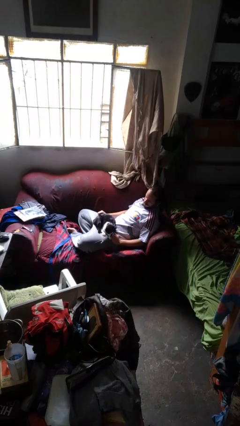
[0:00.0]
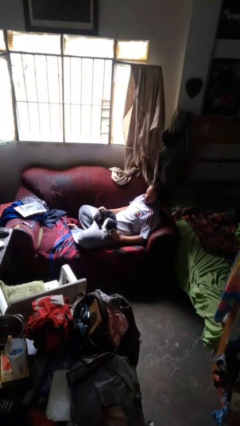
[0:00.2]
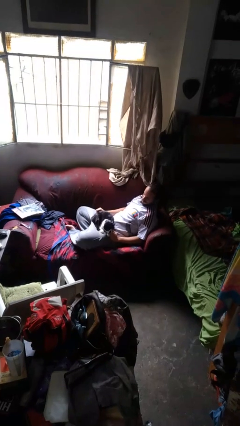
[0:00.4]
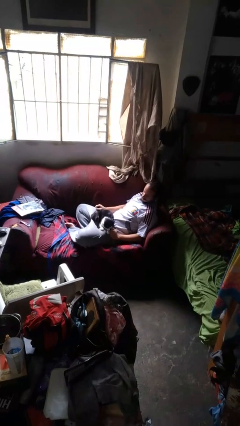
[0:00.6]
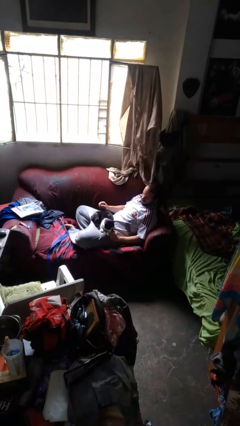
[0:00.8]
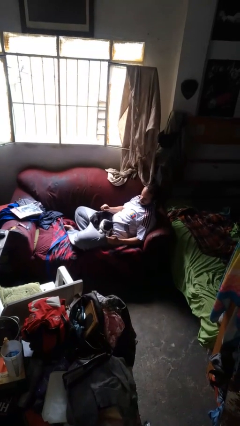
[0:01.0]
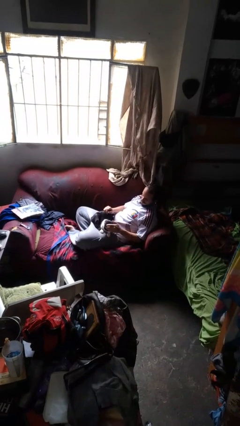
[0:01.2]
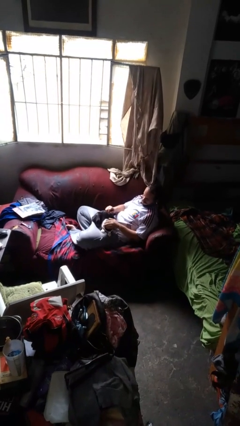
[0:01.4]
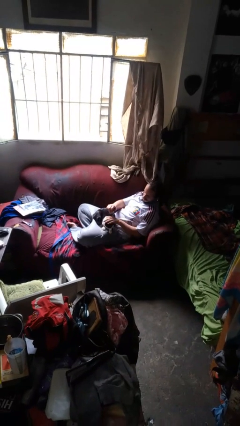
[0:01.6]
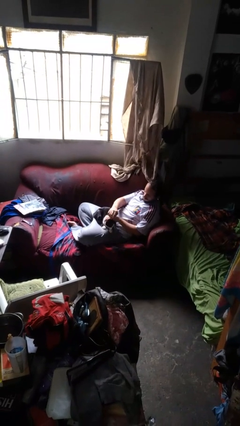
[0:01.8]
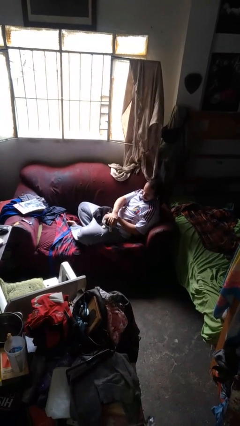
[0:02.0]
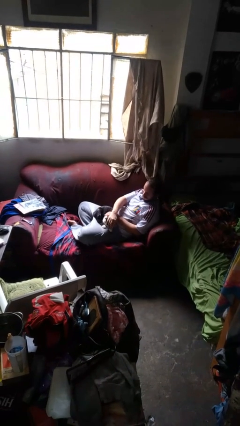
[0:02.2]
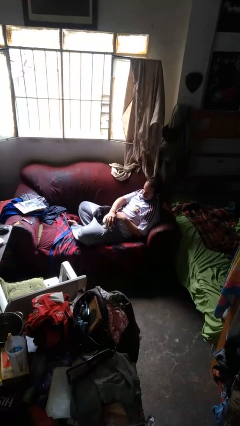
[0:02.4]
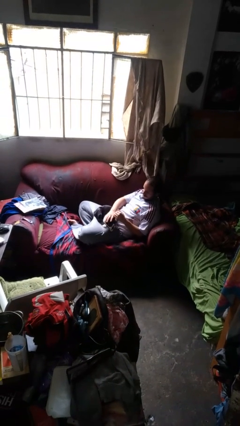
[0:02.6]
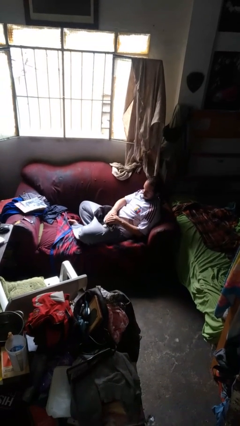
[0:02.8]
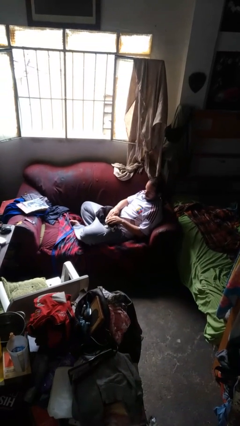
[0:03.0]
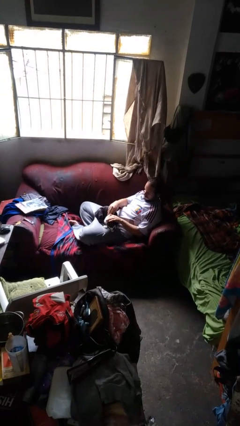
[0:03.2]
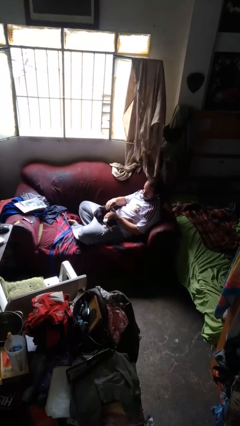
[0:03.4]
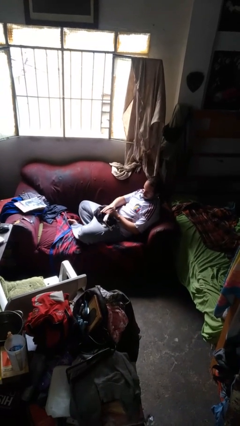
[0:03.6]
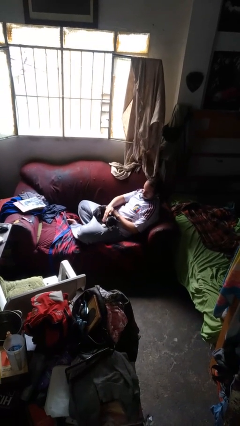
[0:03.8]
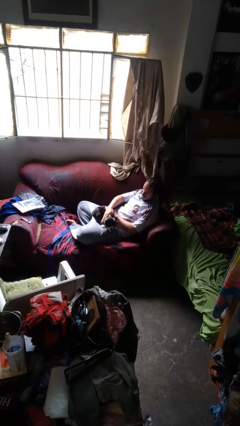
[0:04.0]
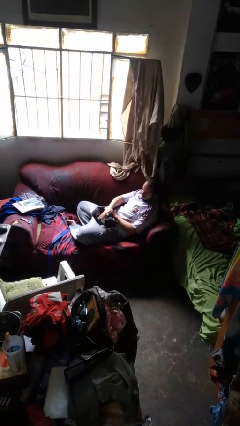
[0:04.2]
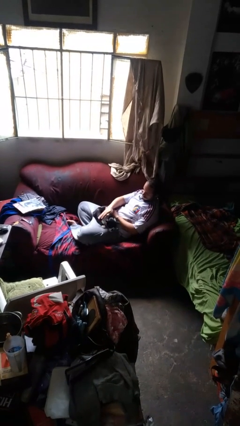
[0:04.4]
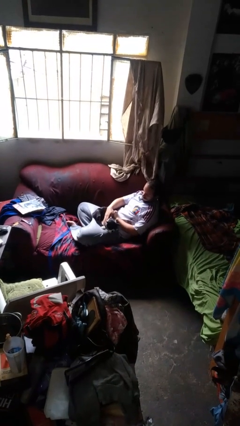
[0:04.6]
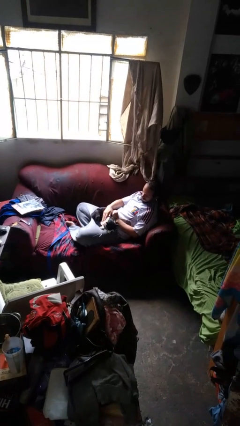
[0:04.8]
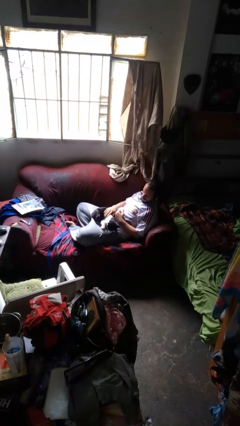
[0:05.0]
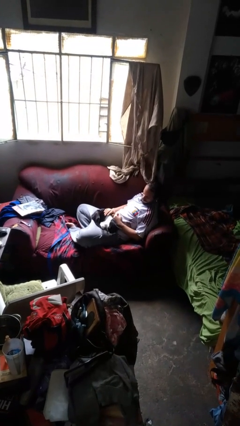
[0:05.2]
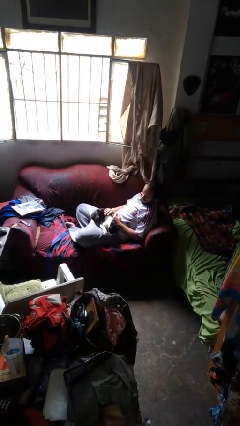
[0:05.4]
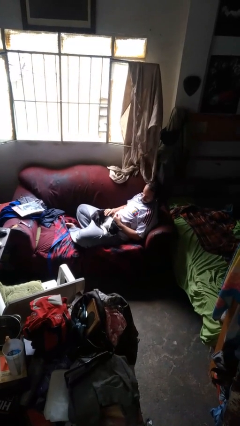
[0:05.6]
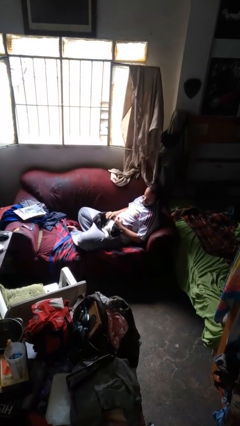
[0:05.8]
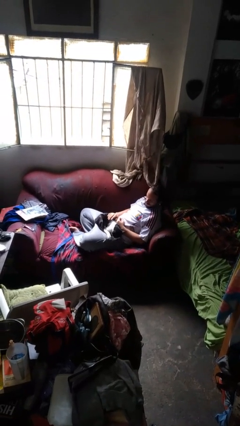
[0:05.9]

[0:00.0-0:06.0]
person pets cat

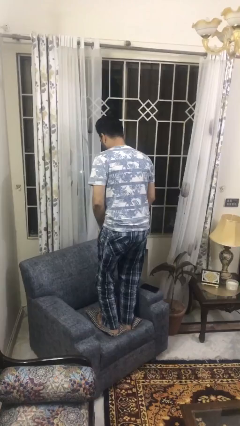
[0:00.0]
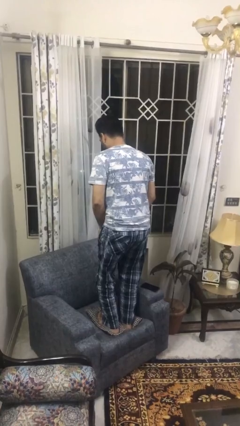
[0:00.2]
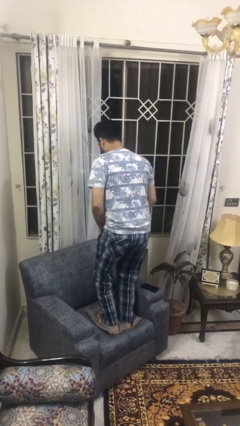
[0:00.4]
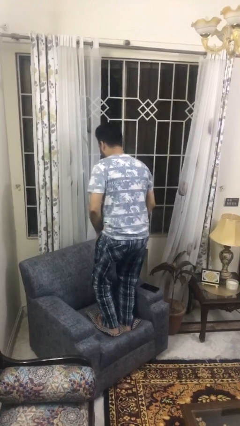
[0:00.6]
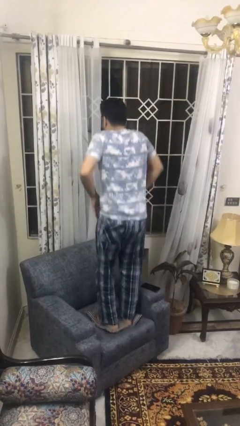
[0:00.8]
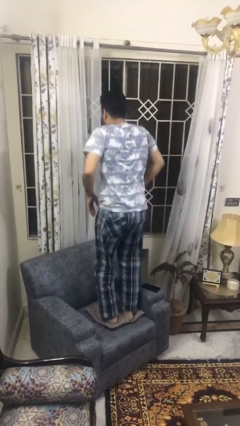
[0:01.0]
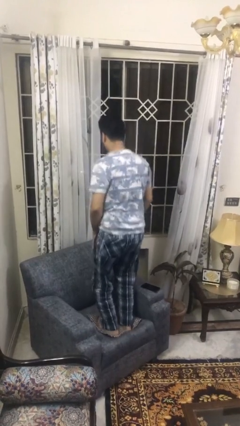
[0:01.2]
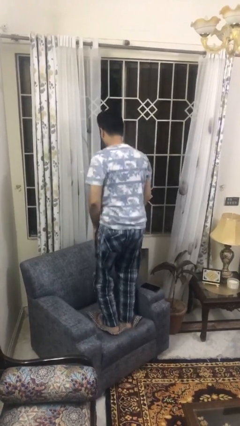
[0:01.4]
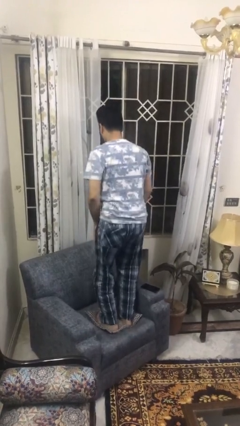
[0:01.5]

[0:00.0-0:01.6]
person jumps on couch

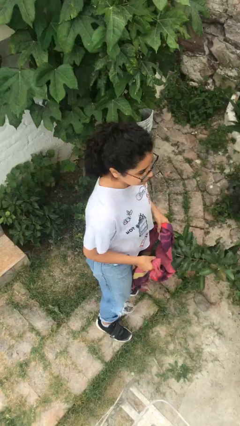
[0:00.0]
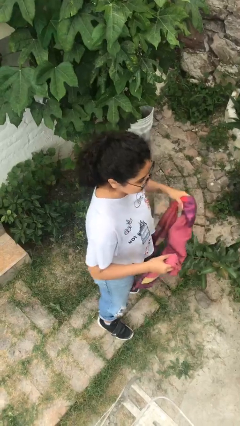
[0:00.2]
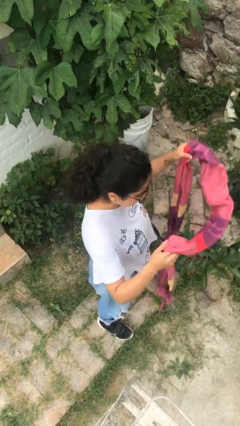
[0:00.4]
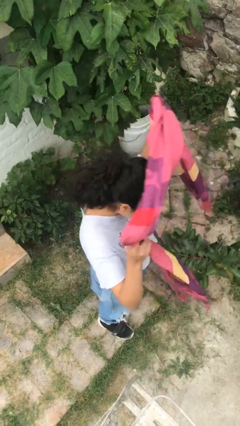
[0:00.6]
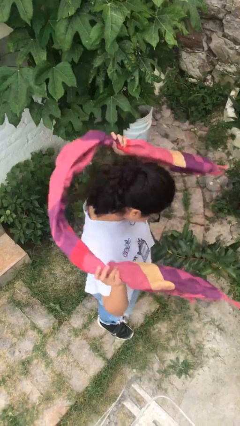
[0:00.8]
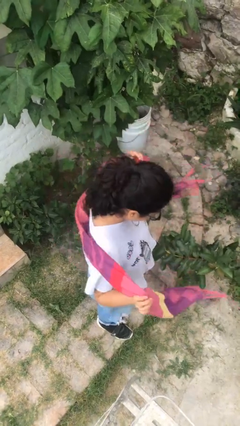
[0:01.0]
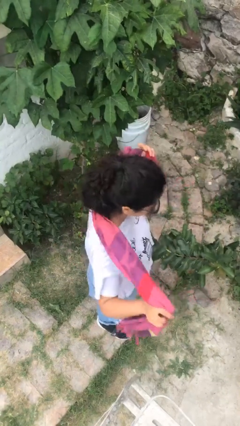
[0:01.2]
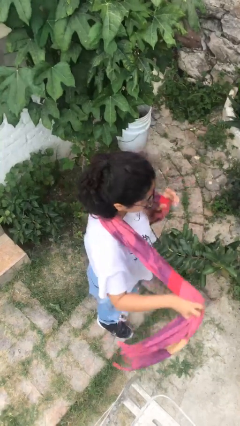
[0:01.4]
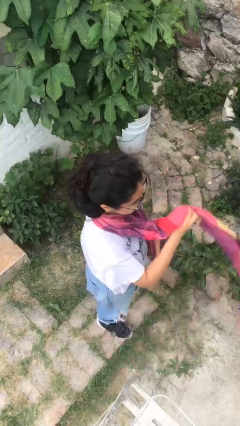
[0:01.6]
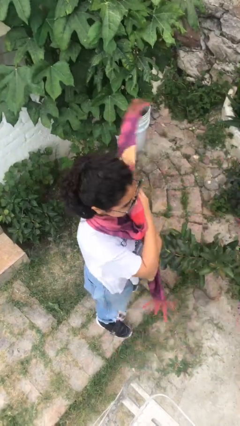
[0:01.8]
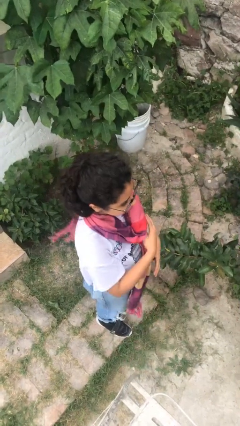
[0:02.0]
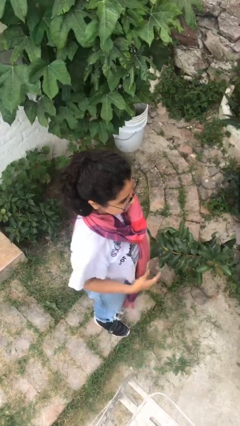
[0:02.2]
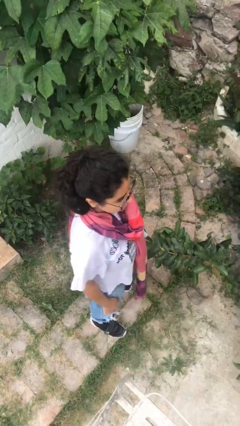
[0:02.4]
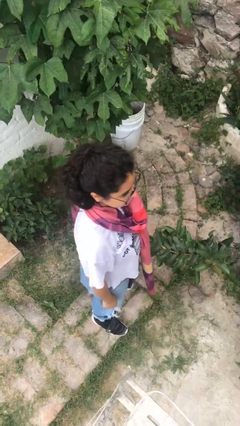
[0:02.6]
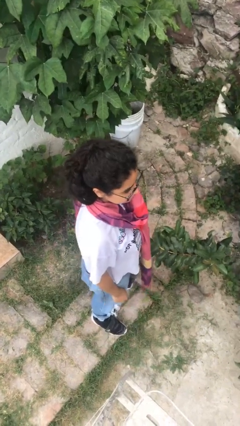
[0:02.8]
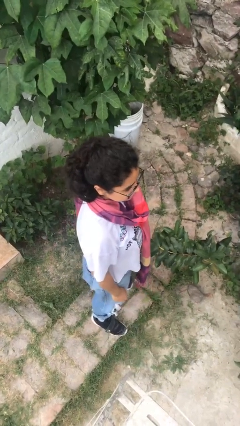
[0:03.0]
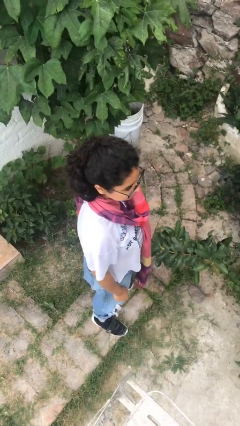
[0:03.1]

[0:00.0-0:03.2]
person puts on scarf

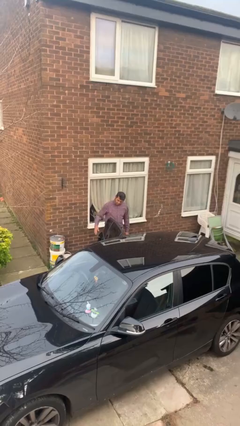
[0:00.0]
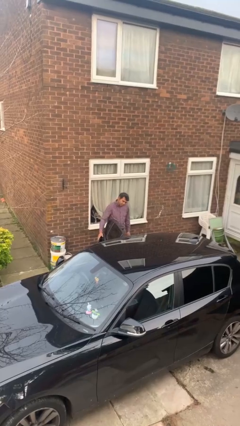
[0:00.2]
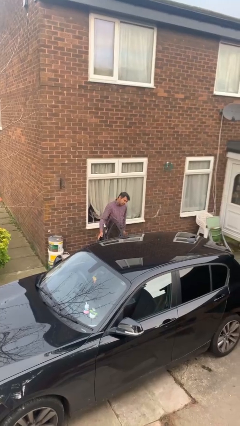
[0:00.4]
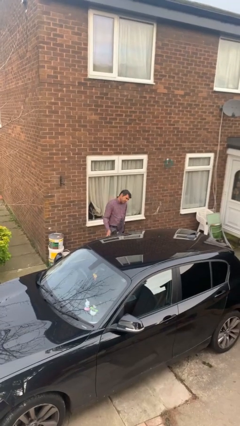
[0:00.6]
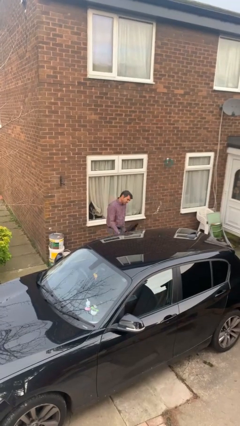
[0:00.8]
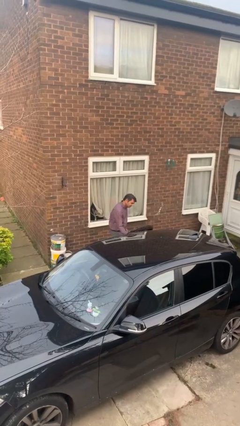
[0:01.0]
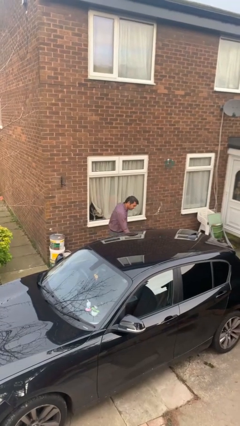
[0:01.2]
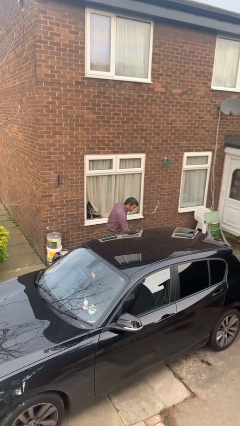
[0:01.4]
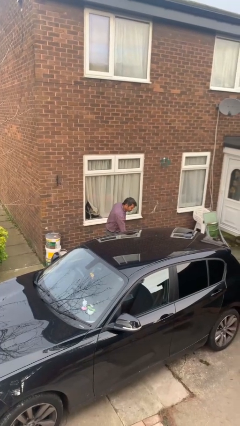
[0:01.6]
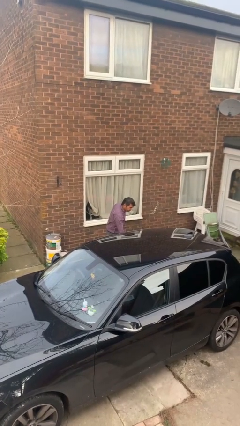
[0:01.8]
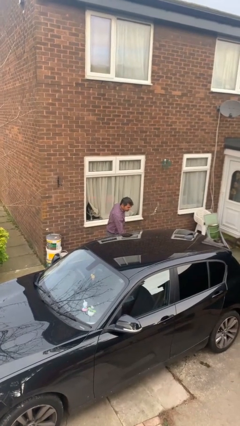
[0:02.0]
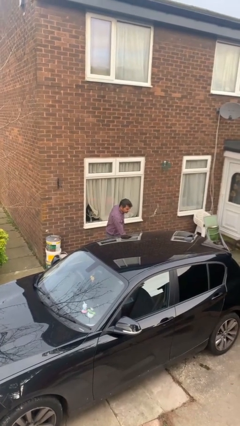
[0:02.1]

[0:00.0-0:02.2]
person closes car door

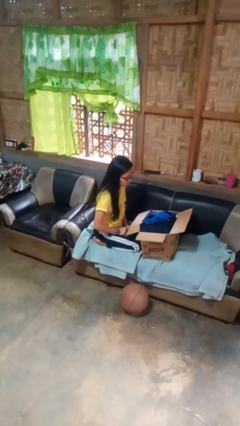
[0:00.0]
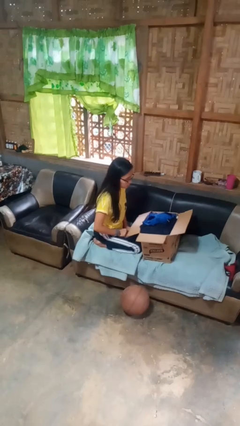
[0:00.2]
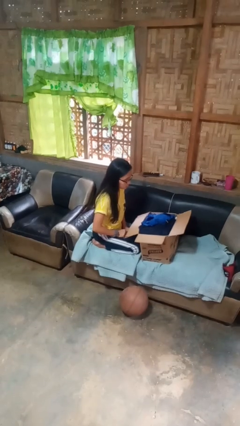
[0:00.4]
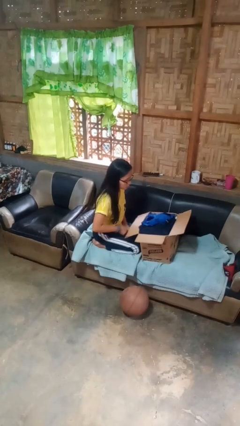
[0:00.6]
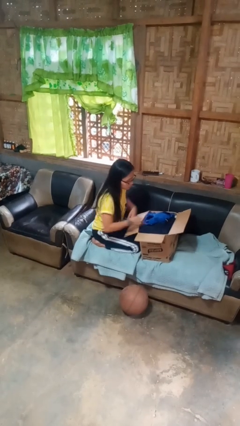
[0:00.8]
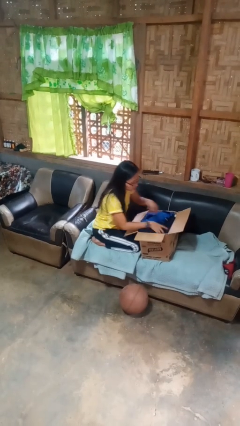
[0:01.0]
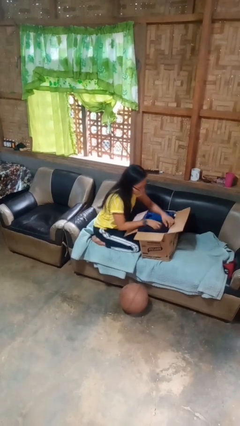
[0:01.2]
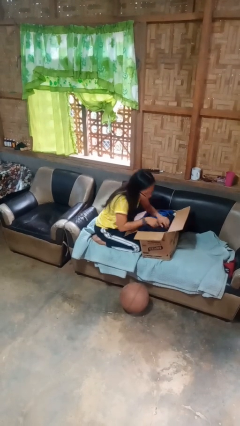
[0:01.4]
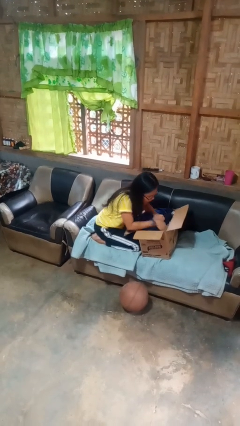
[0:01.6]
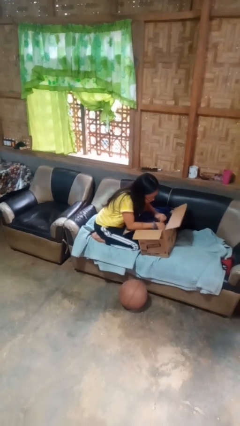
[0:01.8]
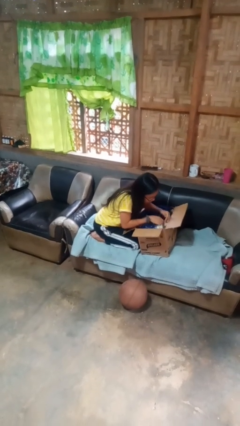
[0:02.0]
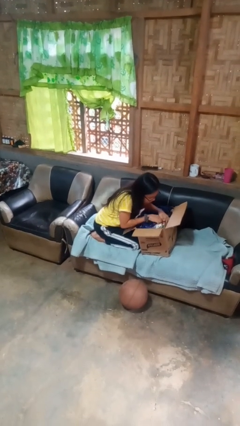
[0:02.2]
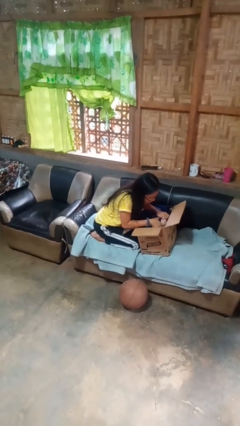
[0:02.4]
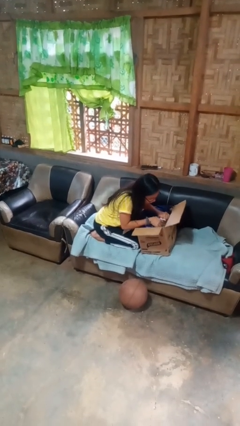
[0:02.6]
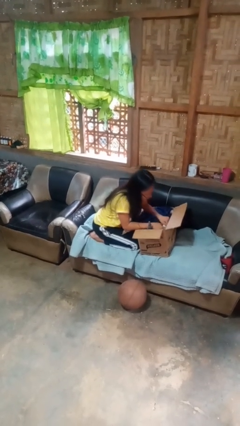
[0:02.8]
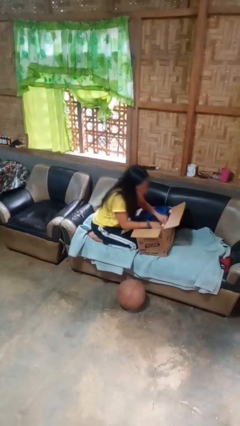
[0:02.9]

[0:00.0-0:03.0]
person searches in box

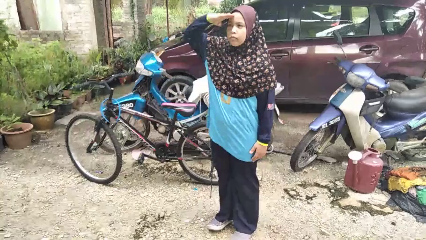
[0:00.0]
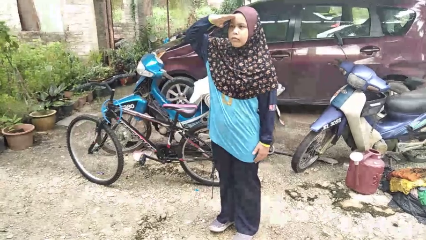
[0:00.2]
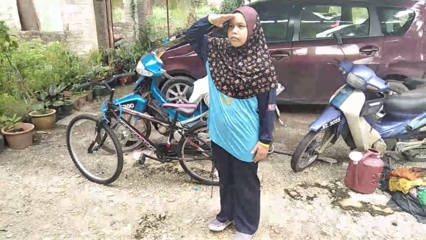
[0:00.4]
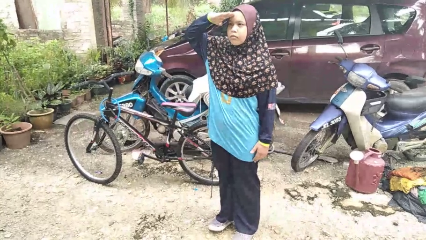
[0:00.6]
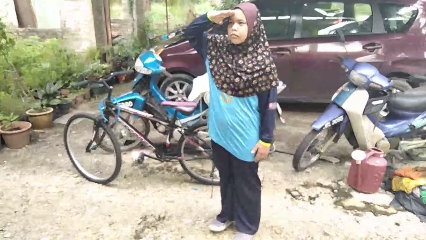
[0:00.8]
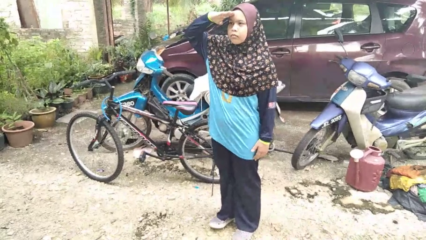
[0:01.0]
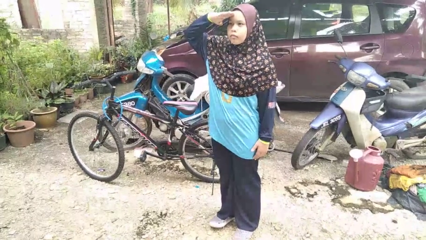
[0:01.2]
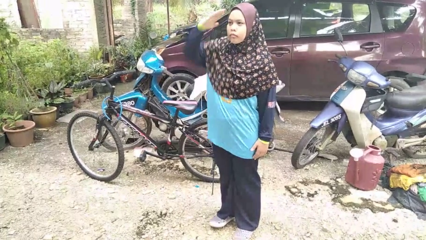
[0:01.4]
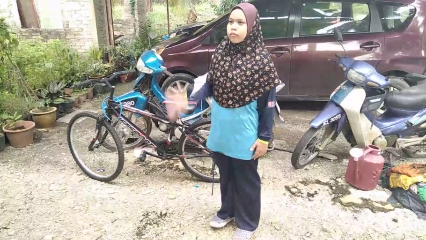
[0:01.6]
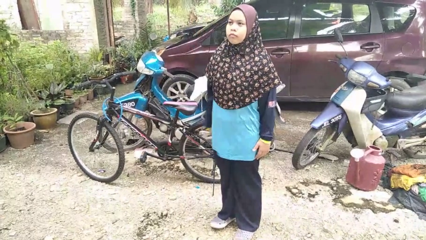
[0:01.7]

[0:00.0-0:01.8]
person salutes
